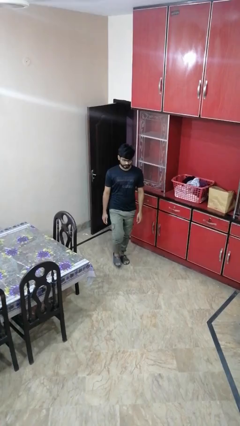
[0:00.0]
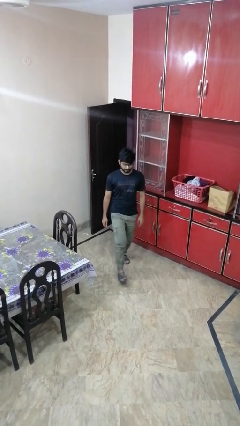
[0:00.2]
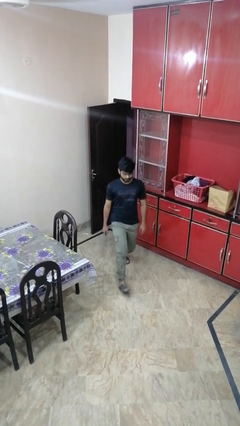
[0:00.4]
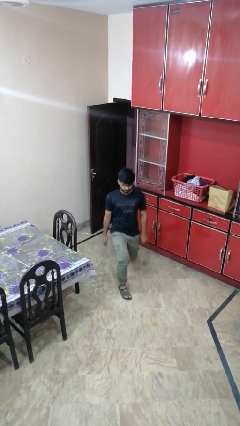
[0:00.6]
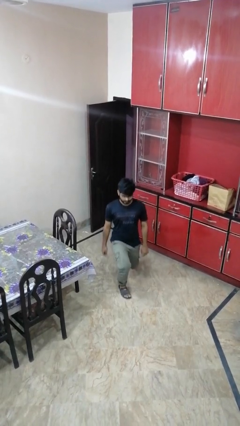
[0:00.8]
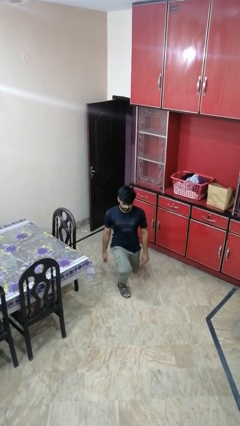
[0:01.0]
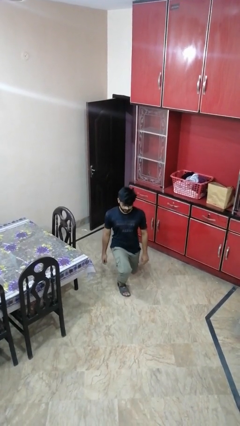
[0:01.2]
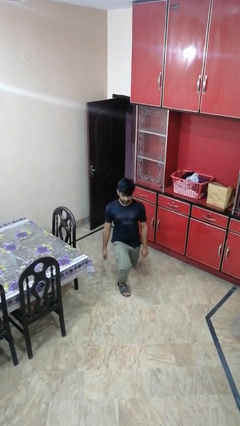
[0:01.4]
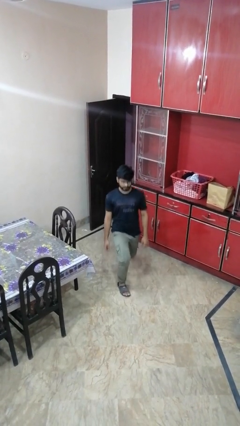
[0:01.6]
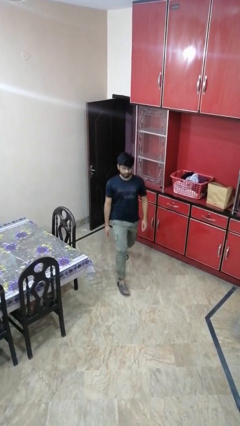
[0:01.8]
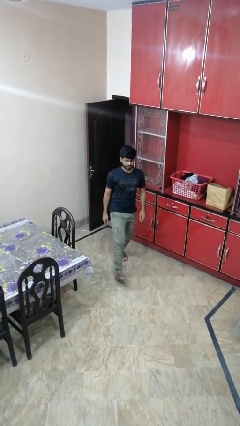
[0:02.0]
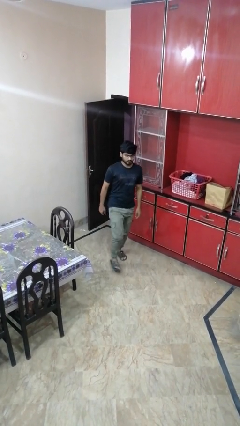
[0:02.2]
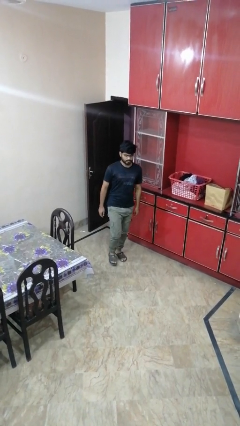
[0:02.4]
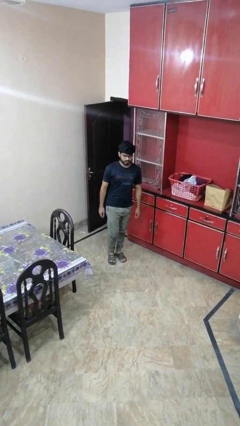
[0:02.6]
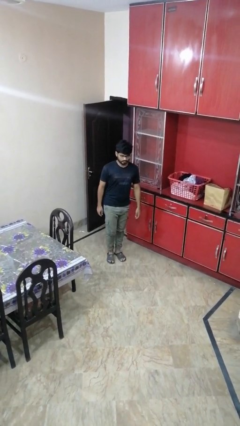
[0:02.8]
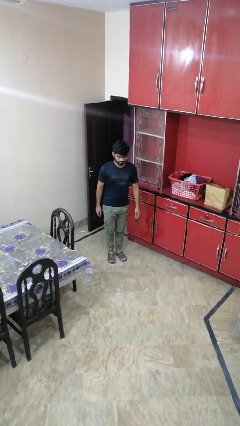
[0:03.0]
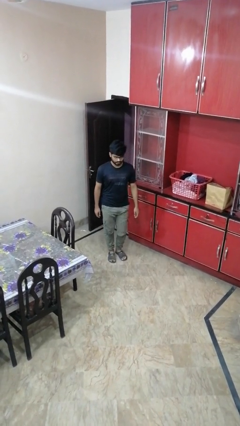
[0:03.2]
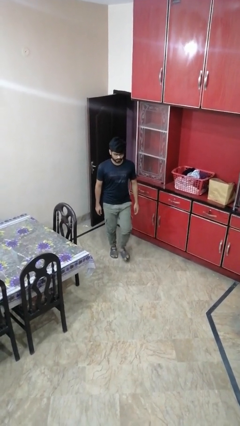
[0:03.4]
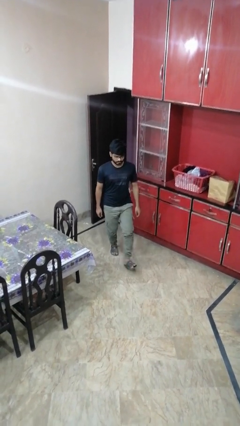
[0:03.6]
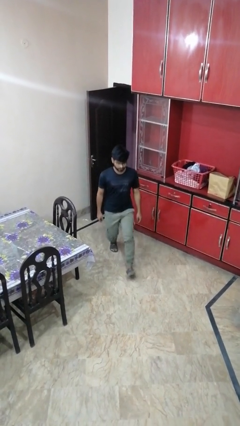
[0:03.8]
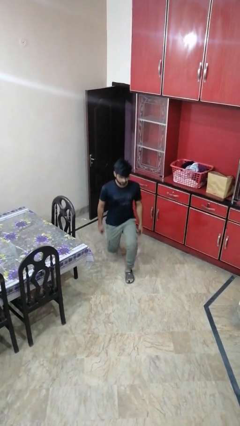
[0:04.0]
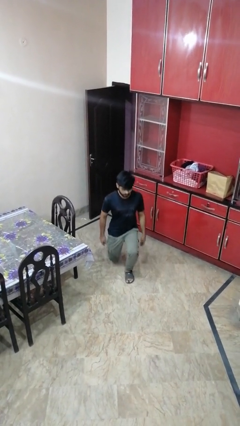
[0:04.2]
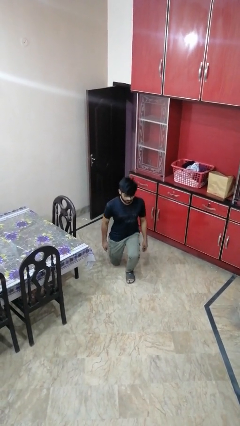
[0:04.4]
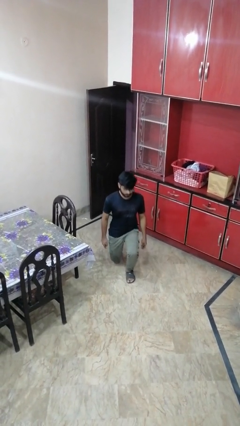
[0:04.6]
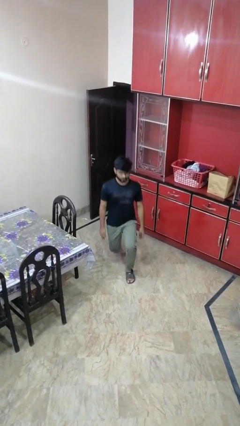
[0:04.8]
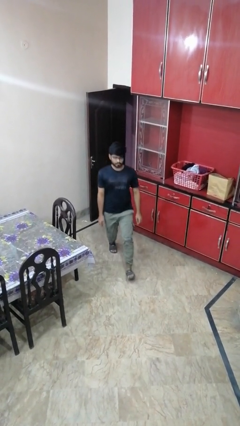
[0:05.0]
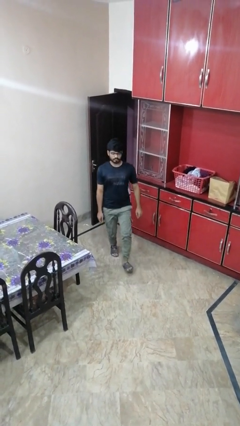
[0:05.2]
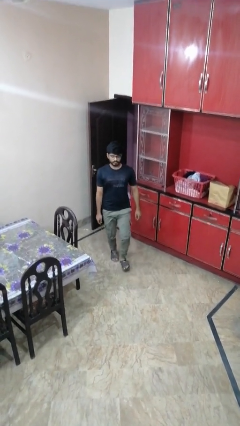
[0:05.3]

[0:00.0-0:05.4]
person exercises with lunges

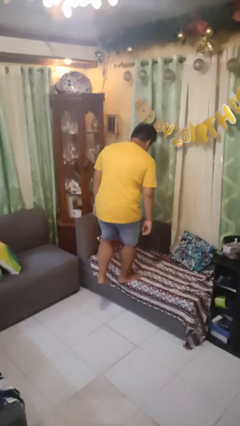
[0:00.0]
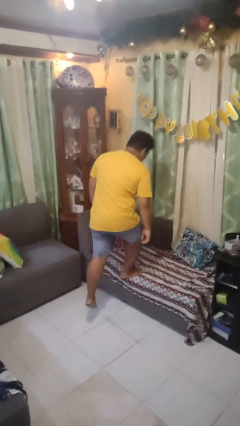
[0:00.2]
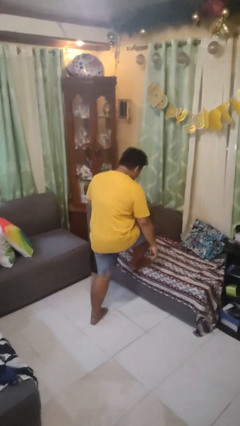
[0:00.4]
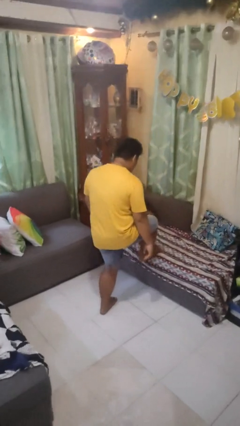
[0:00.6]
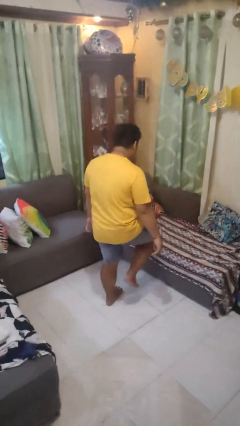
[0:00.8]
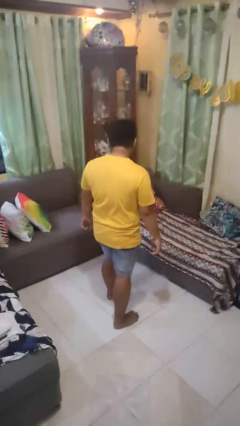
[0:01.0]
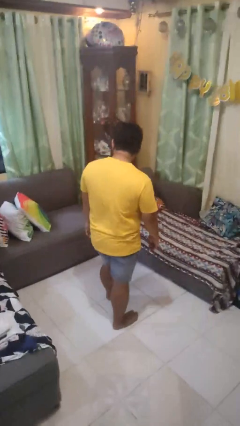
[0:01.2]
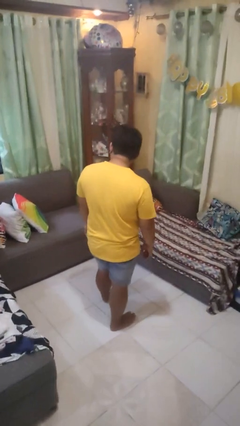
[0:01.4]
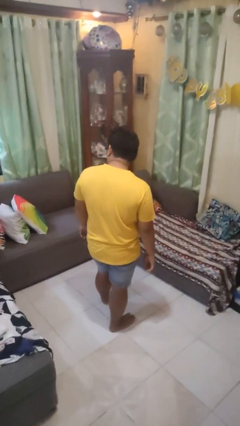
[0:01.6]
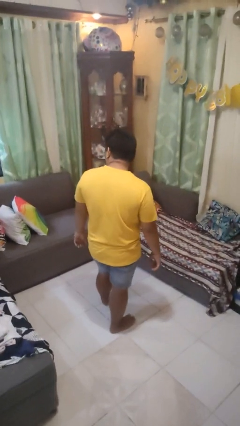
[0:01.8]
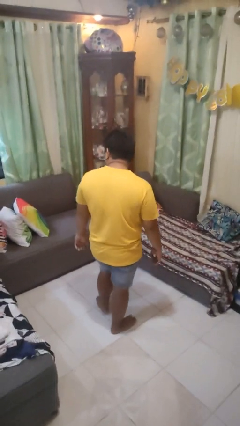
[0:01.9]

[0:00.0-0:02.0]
person climbs off couch

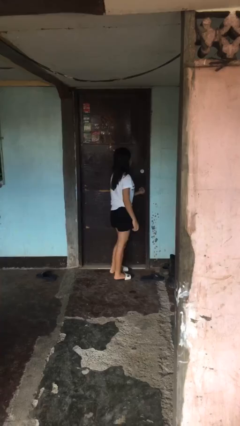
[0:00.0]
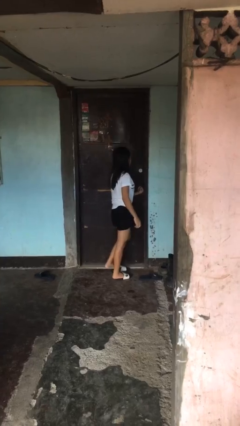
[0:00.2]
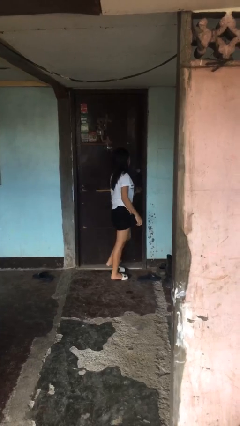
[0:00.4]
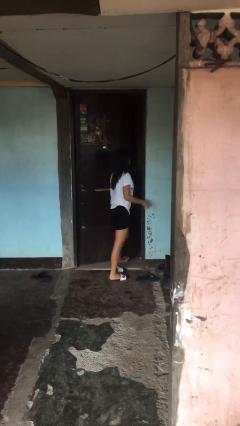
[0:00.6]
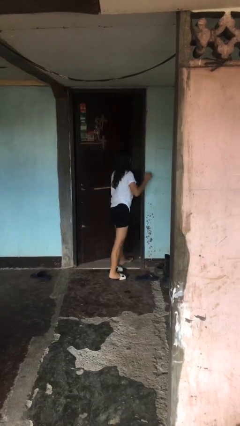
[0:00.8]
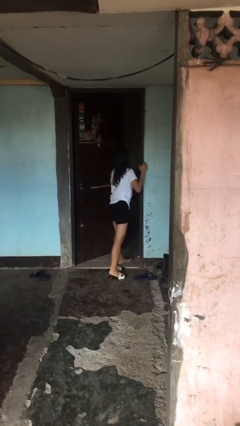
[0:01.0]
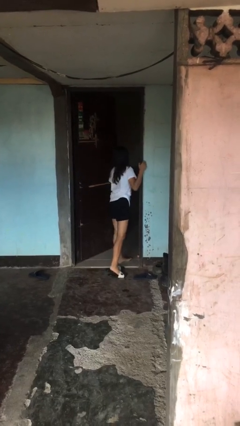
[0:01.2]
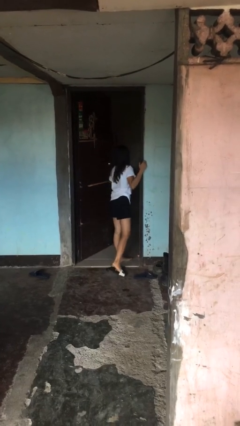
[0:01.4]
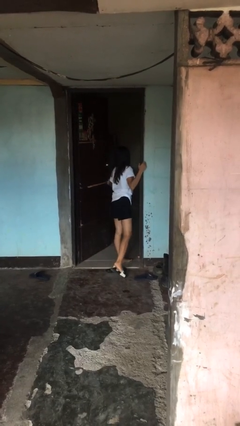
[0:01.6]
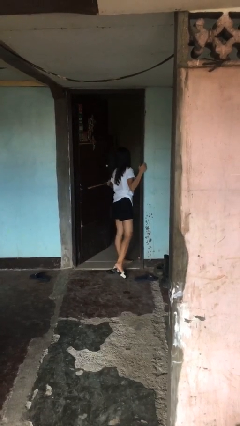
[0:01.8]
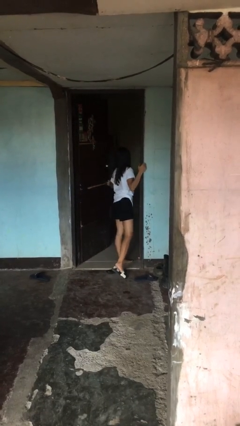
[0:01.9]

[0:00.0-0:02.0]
person opens facility door

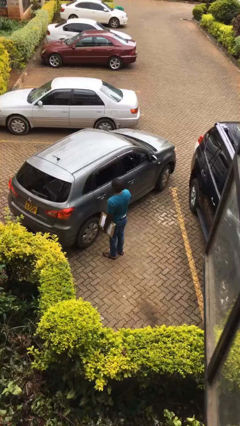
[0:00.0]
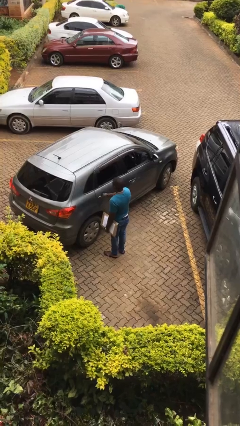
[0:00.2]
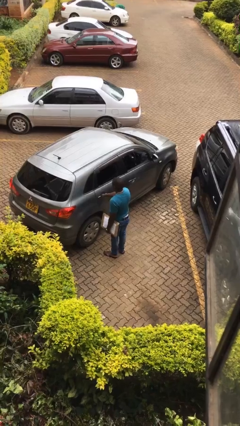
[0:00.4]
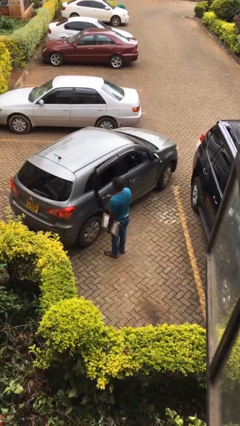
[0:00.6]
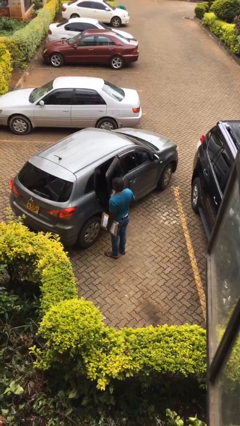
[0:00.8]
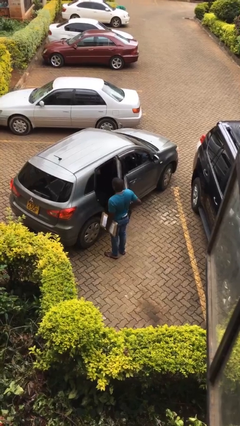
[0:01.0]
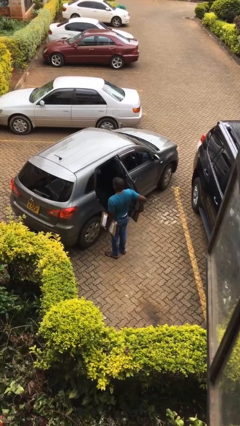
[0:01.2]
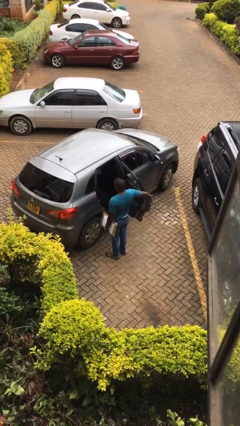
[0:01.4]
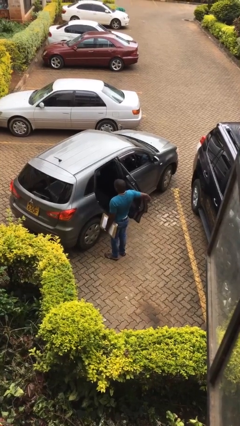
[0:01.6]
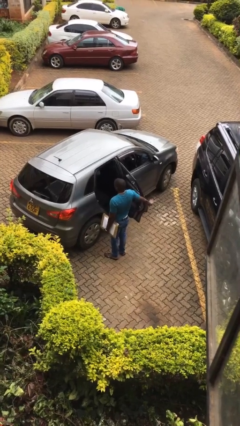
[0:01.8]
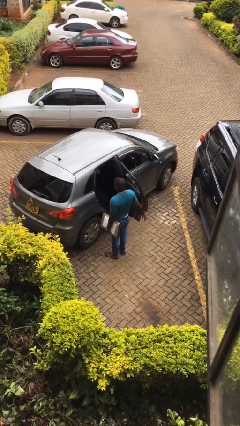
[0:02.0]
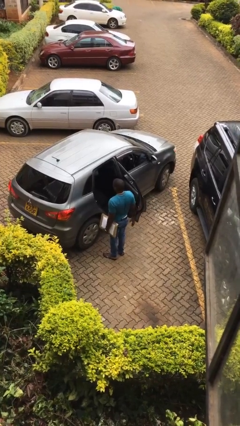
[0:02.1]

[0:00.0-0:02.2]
person opens car door

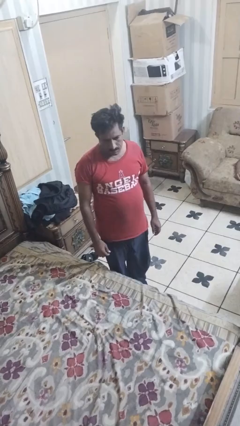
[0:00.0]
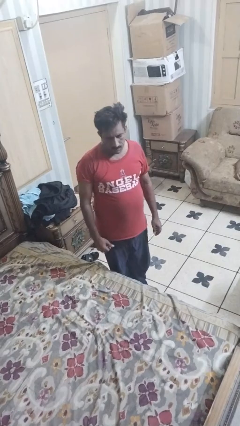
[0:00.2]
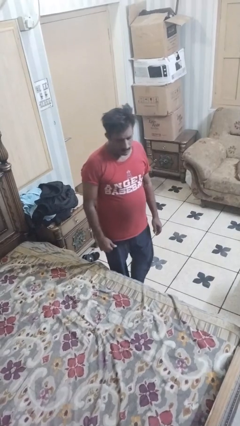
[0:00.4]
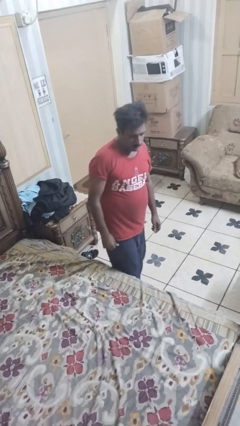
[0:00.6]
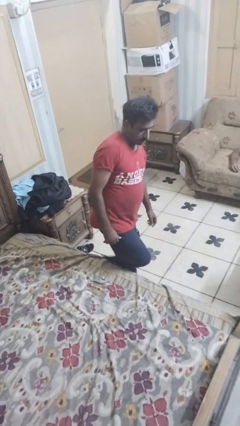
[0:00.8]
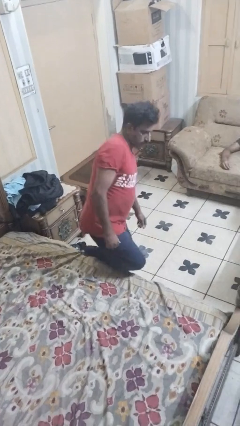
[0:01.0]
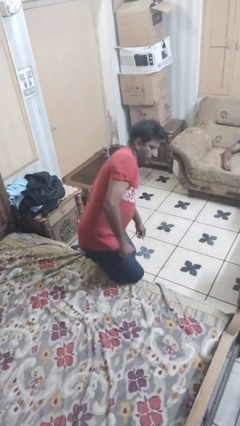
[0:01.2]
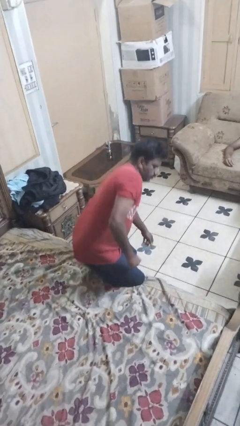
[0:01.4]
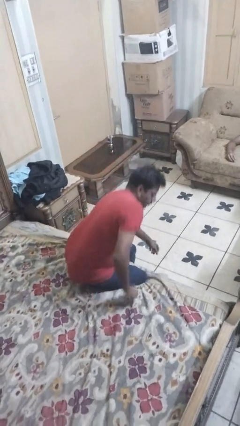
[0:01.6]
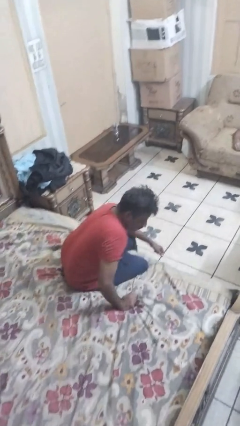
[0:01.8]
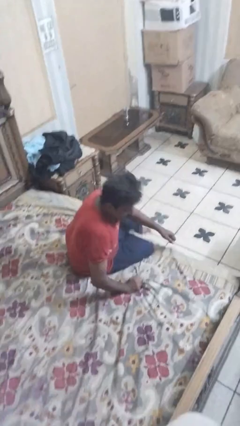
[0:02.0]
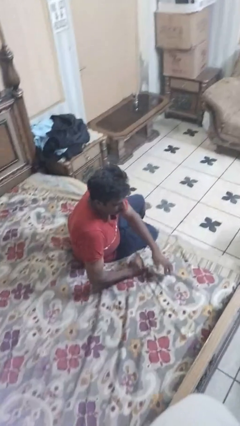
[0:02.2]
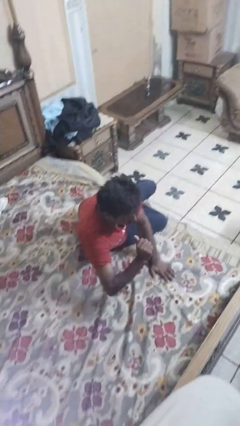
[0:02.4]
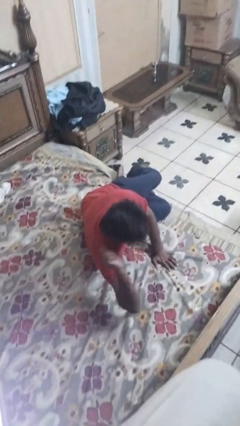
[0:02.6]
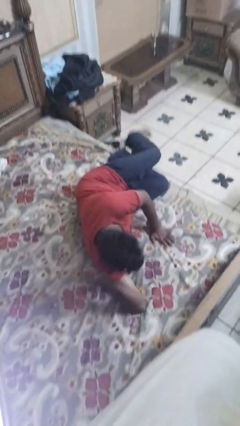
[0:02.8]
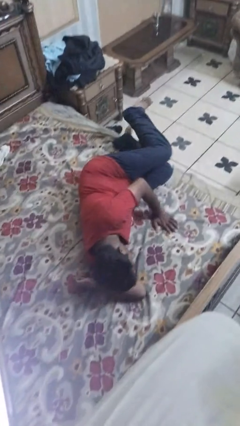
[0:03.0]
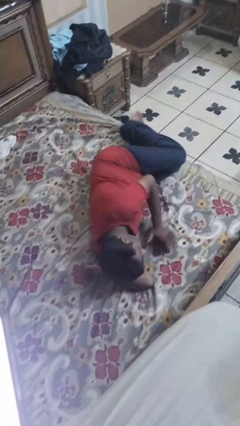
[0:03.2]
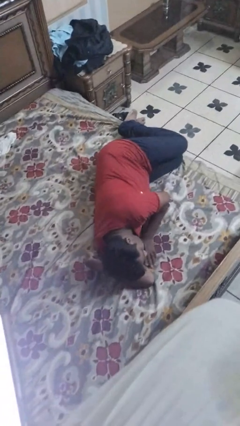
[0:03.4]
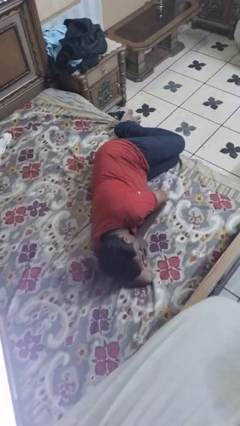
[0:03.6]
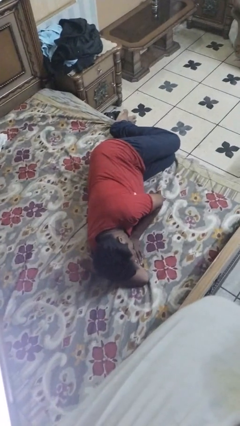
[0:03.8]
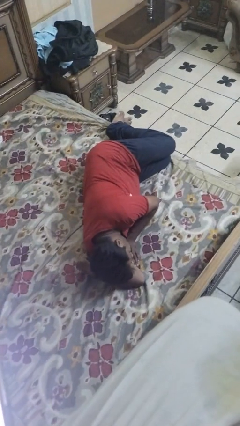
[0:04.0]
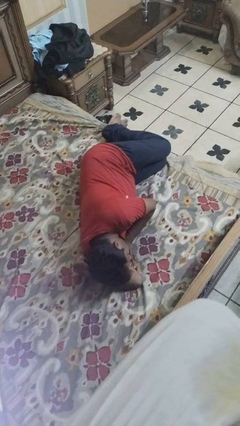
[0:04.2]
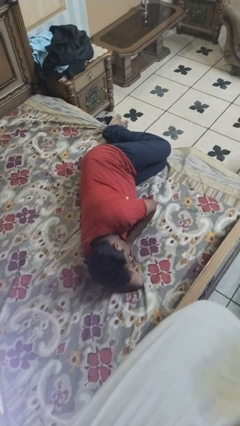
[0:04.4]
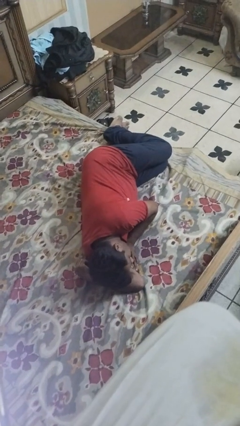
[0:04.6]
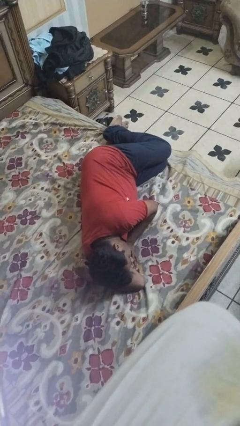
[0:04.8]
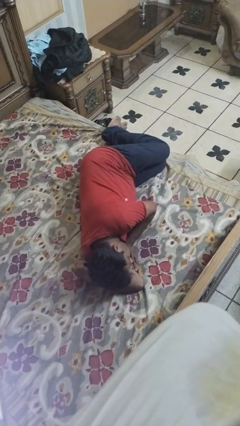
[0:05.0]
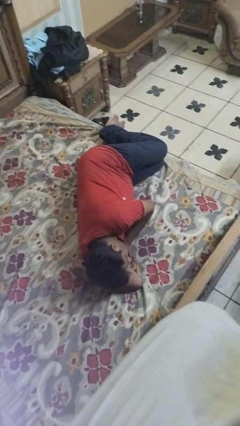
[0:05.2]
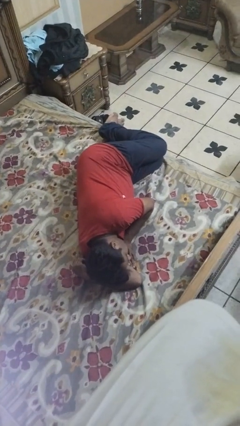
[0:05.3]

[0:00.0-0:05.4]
person lies down on bed

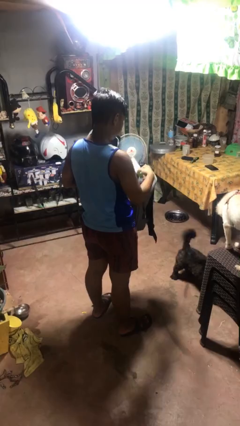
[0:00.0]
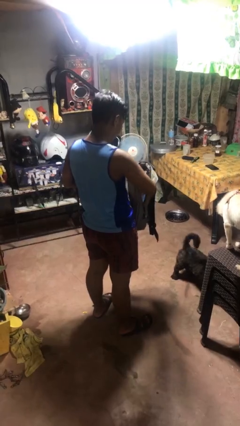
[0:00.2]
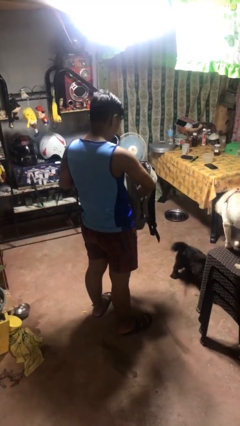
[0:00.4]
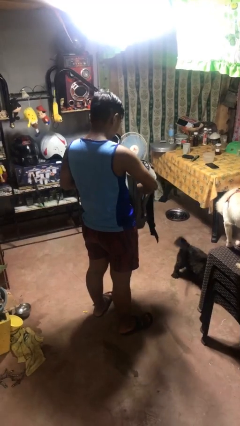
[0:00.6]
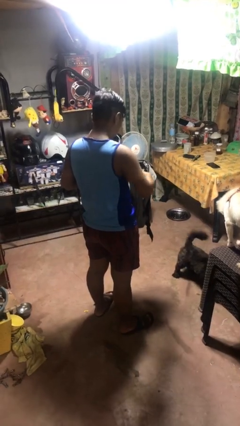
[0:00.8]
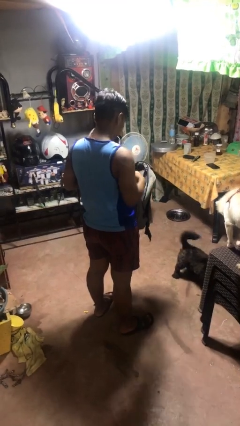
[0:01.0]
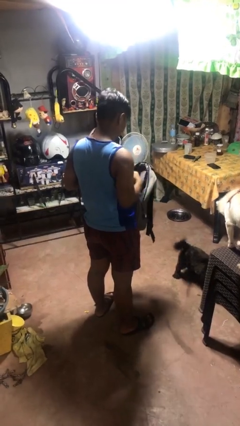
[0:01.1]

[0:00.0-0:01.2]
person puts object into bag
